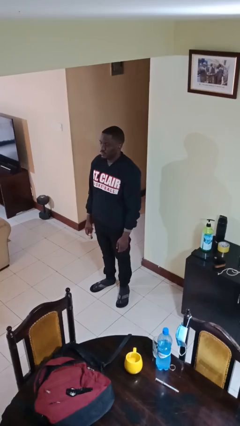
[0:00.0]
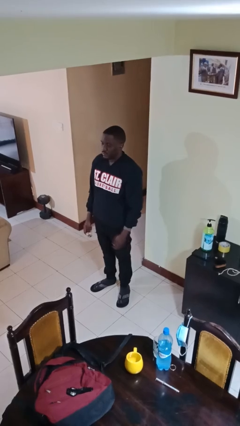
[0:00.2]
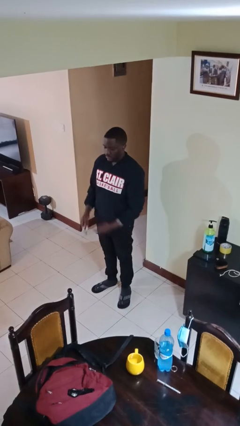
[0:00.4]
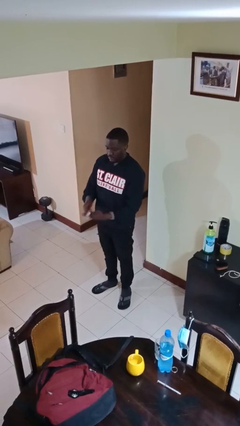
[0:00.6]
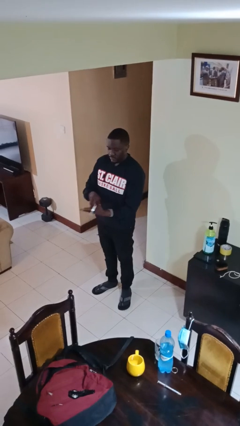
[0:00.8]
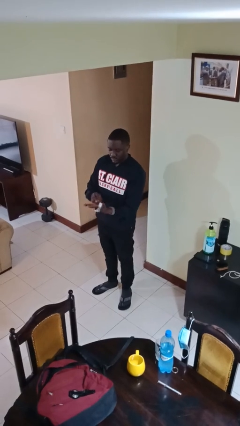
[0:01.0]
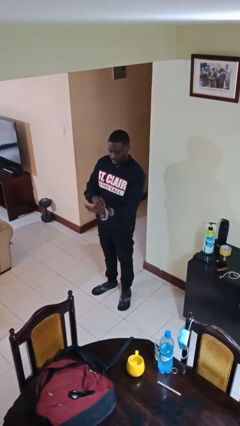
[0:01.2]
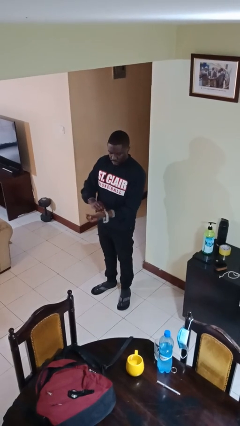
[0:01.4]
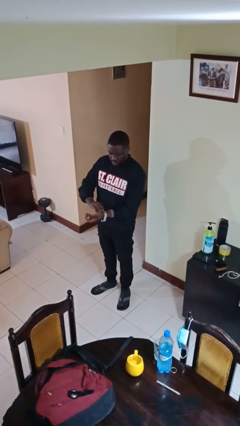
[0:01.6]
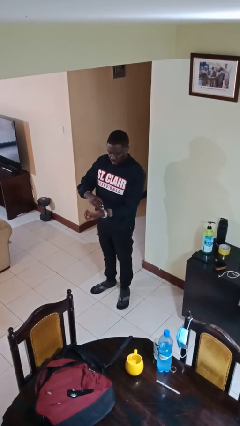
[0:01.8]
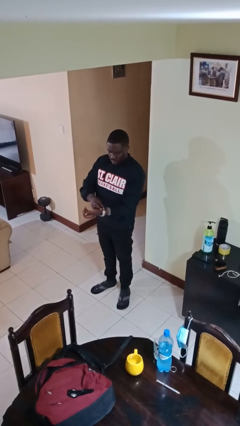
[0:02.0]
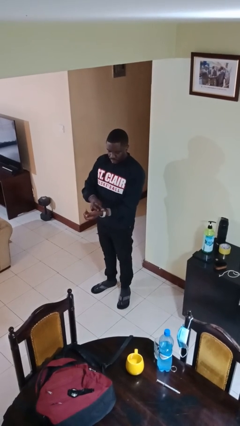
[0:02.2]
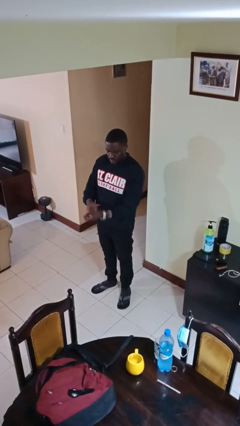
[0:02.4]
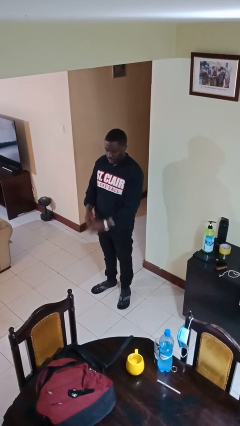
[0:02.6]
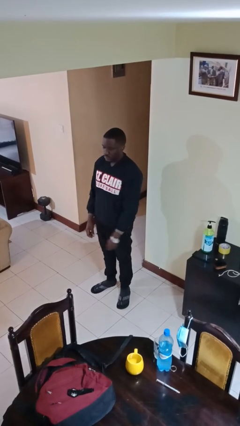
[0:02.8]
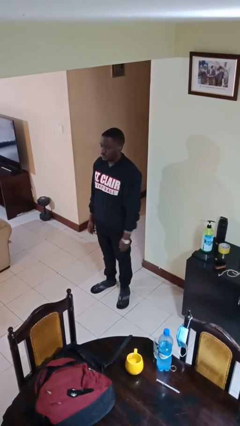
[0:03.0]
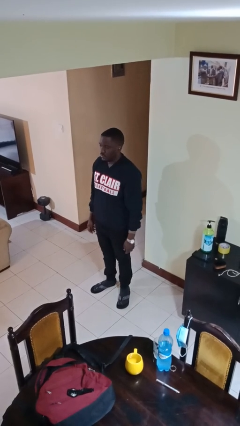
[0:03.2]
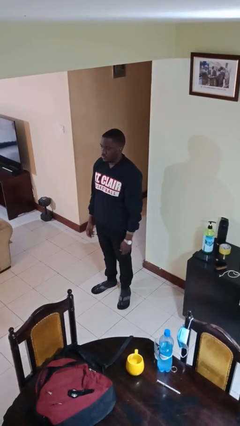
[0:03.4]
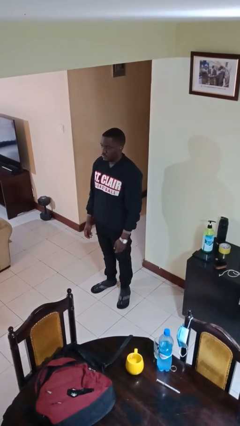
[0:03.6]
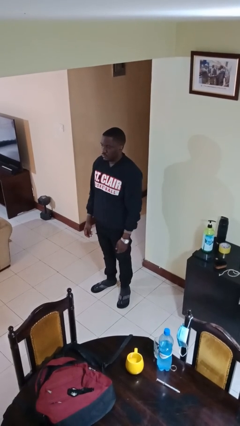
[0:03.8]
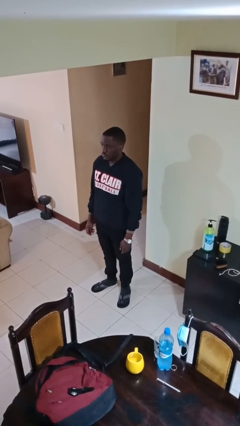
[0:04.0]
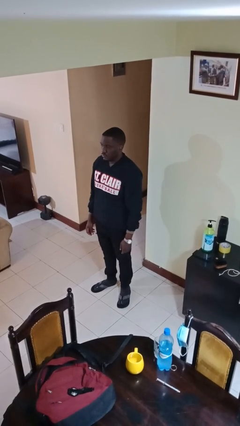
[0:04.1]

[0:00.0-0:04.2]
person puts on wristwatch

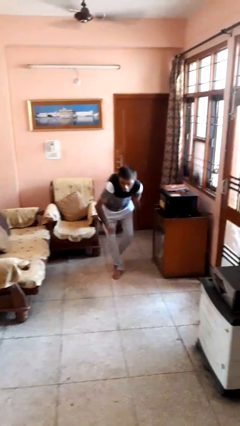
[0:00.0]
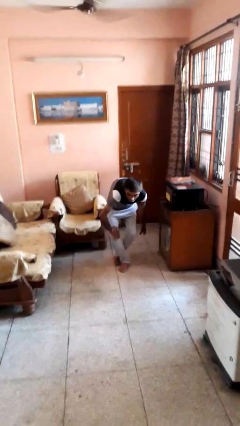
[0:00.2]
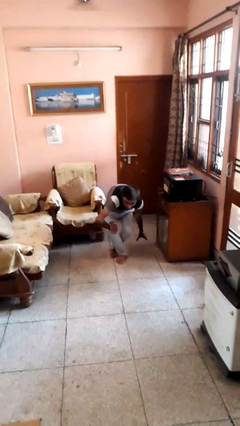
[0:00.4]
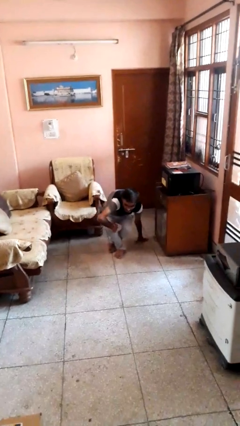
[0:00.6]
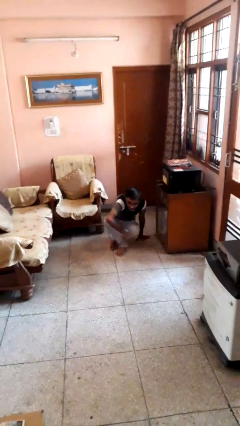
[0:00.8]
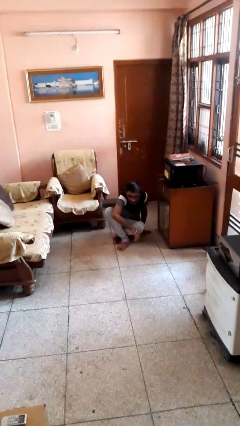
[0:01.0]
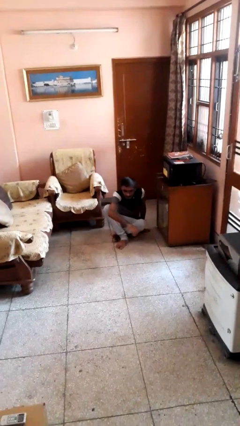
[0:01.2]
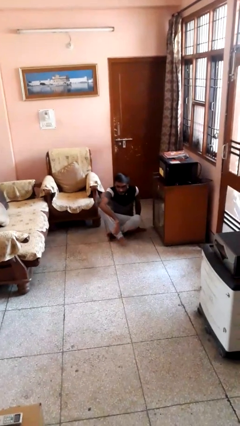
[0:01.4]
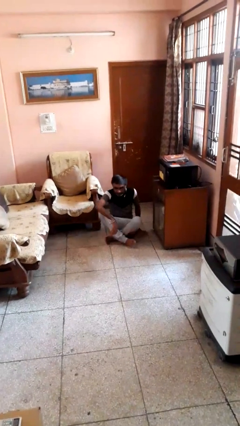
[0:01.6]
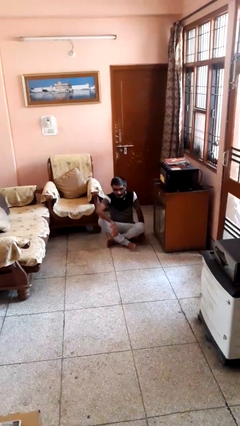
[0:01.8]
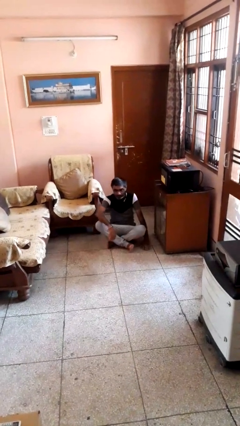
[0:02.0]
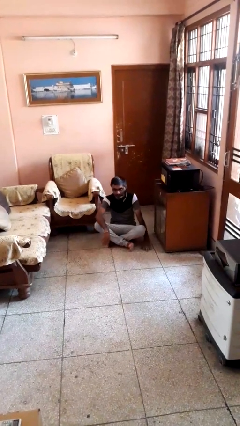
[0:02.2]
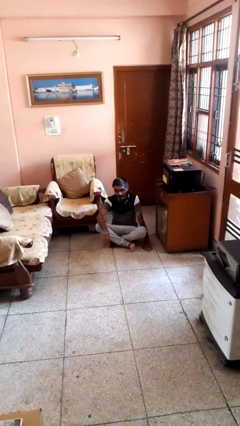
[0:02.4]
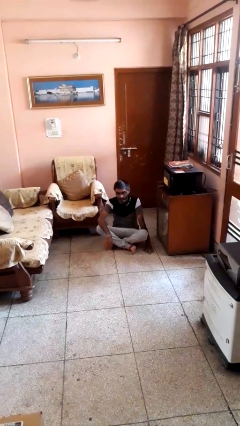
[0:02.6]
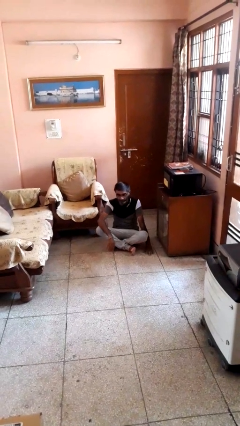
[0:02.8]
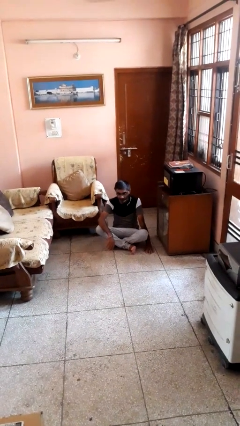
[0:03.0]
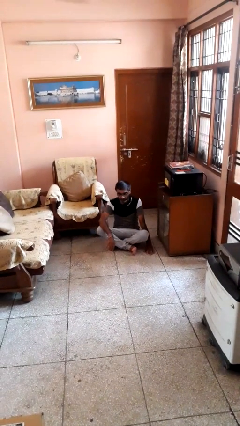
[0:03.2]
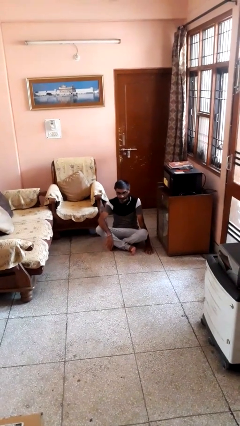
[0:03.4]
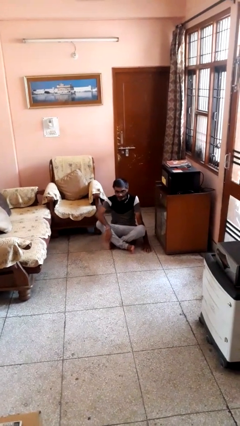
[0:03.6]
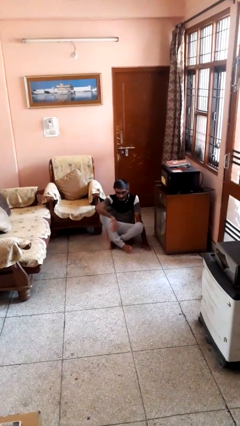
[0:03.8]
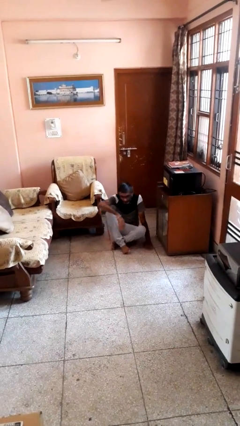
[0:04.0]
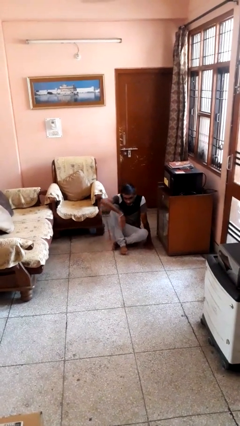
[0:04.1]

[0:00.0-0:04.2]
person sits crisscross

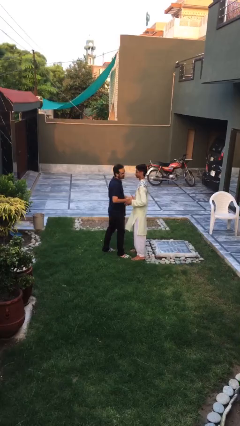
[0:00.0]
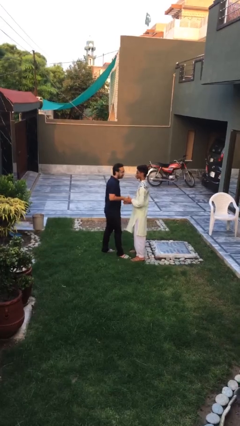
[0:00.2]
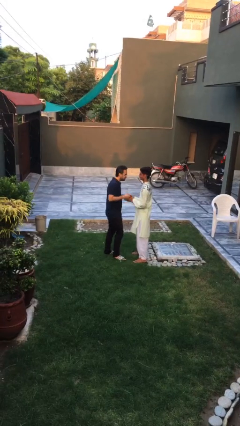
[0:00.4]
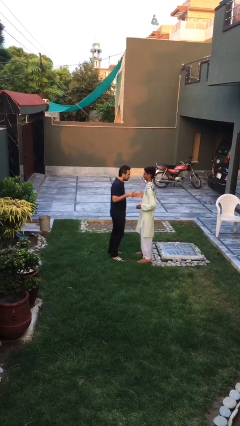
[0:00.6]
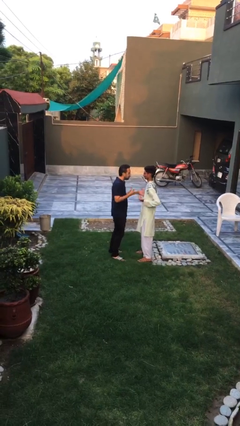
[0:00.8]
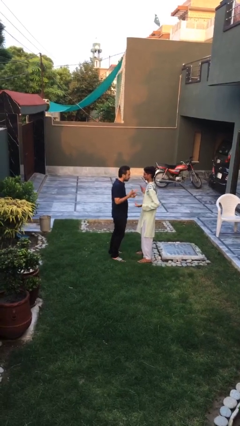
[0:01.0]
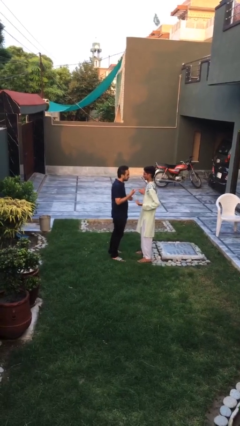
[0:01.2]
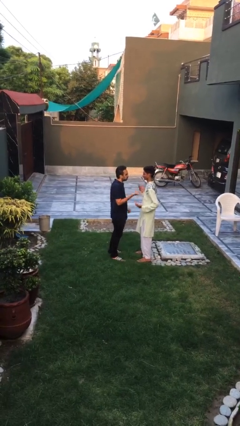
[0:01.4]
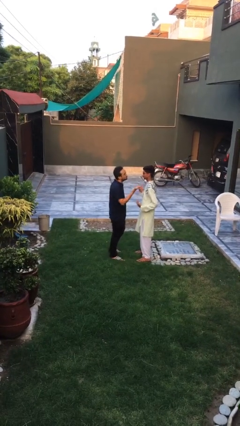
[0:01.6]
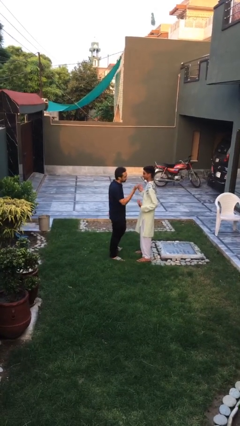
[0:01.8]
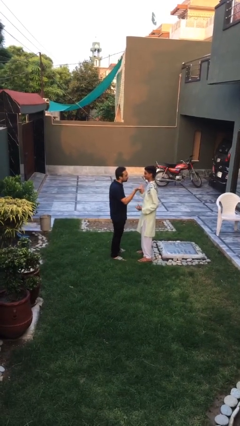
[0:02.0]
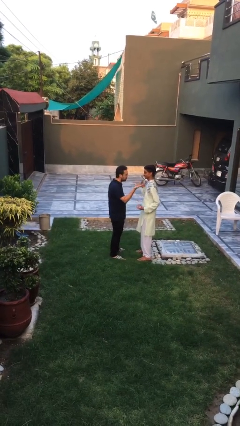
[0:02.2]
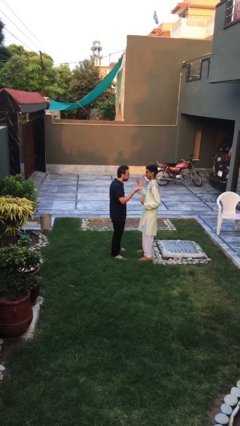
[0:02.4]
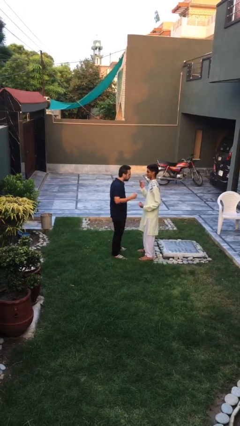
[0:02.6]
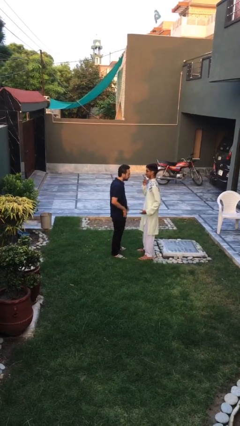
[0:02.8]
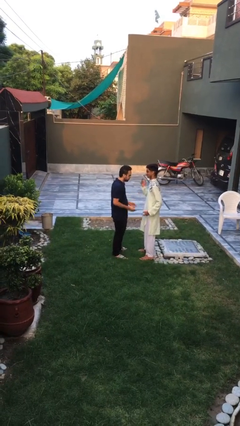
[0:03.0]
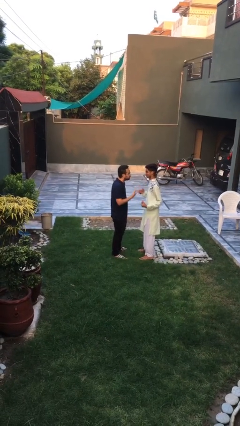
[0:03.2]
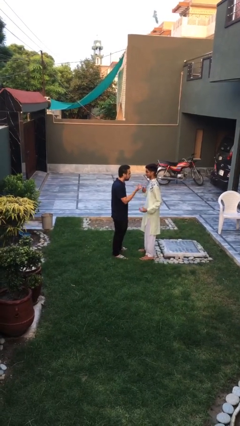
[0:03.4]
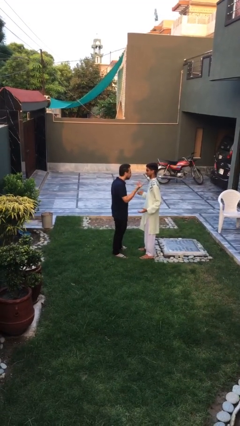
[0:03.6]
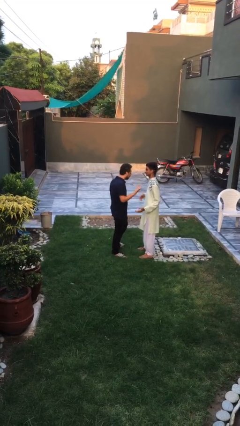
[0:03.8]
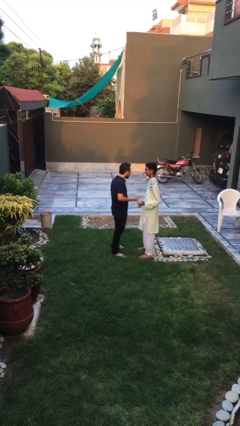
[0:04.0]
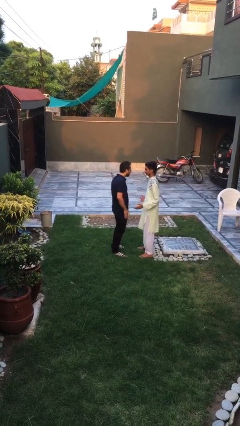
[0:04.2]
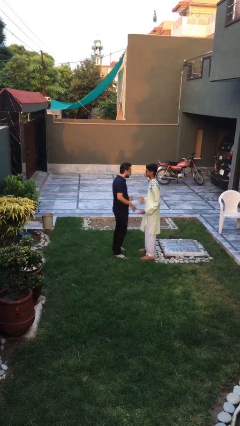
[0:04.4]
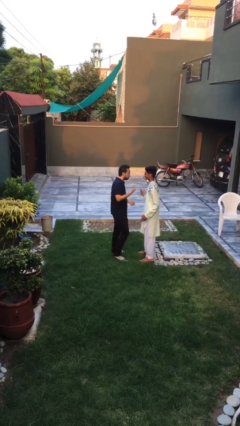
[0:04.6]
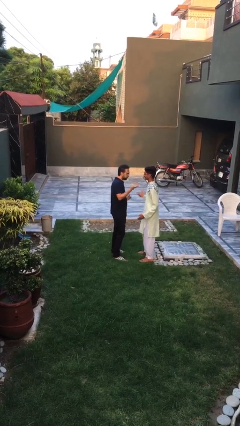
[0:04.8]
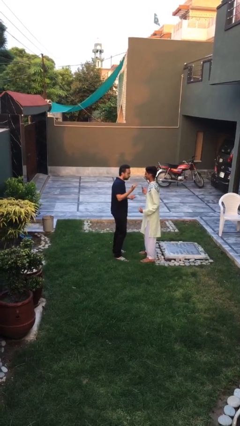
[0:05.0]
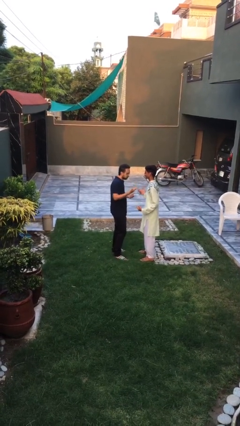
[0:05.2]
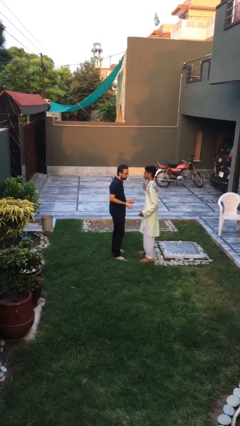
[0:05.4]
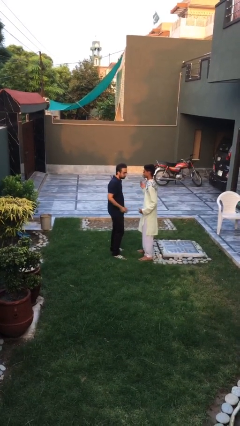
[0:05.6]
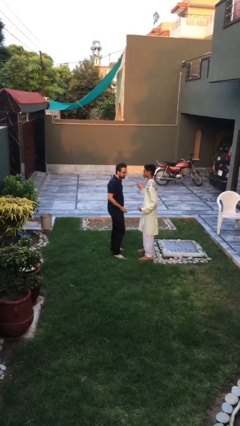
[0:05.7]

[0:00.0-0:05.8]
person talks to person

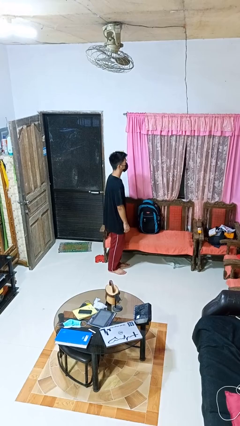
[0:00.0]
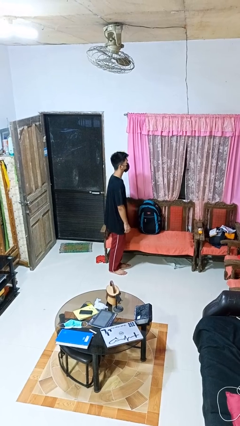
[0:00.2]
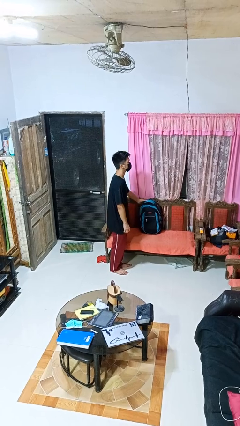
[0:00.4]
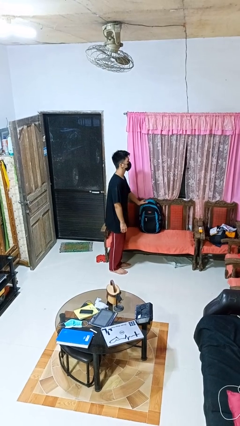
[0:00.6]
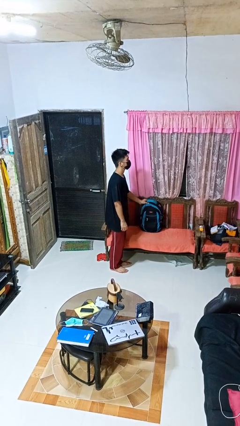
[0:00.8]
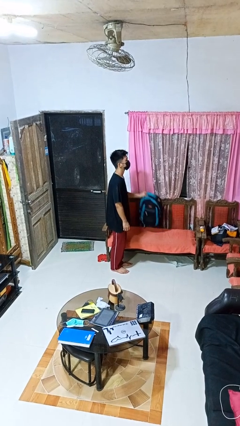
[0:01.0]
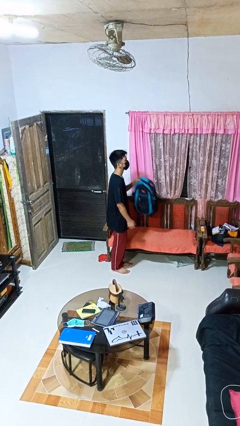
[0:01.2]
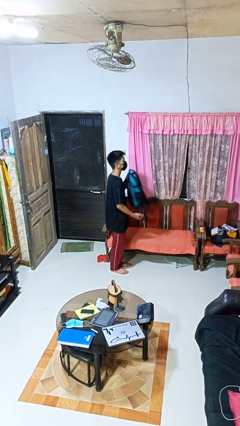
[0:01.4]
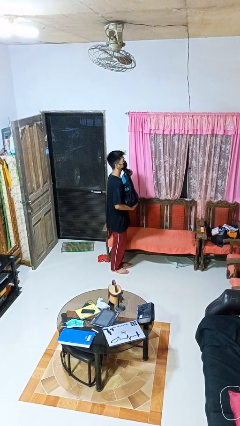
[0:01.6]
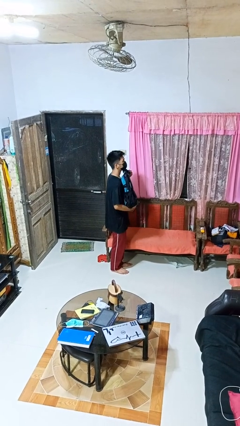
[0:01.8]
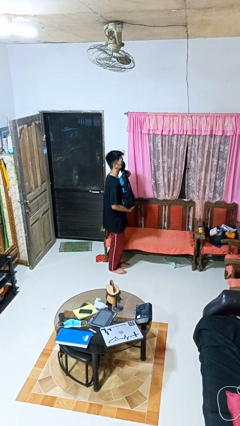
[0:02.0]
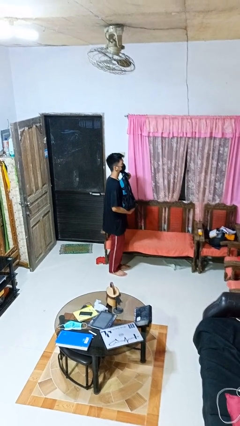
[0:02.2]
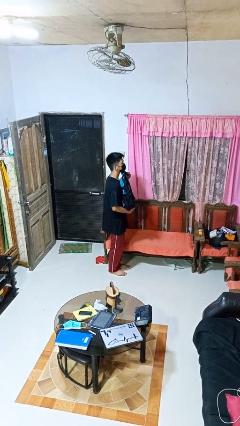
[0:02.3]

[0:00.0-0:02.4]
person picks up object from couch

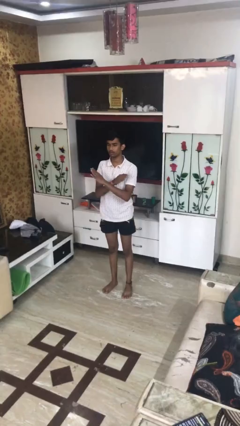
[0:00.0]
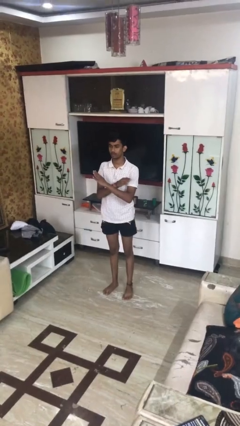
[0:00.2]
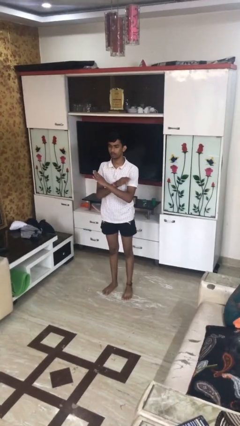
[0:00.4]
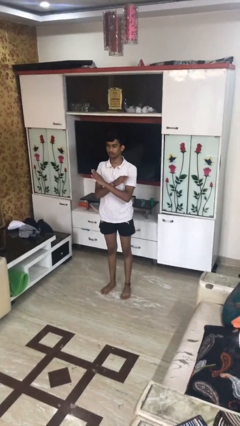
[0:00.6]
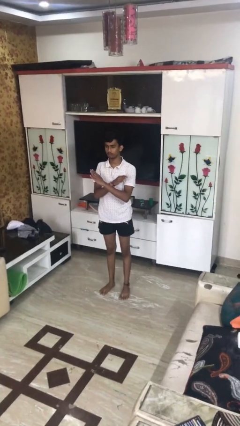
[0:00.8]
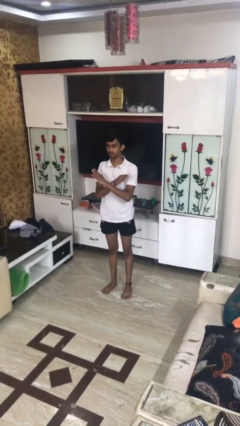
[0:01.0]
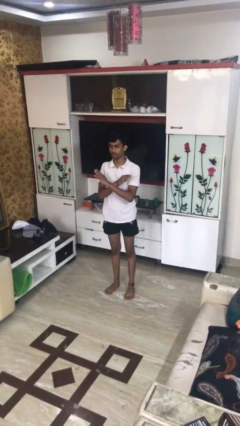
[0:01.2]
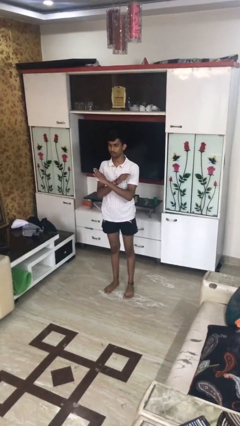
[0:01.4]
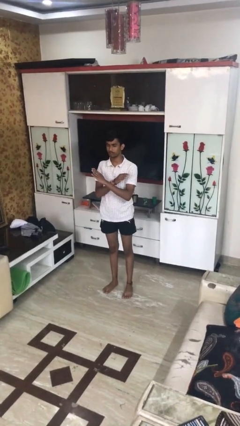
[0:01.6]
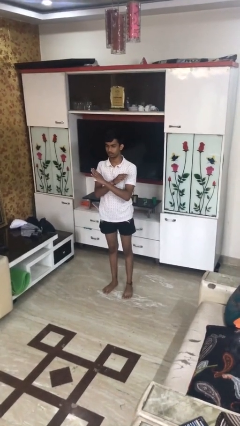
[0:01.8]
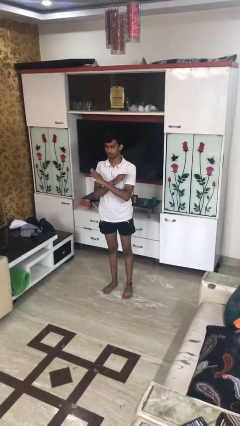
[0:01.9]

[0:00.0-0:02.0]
person gestures arms x
